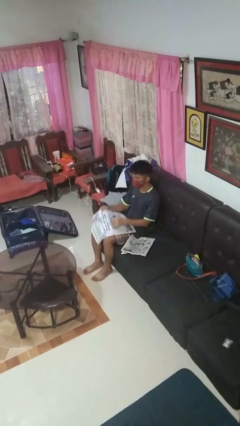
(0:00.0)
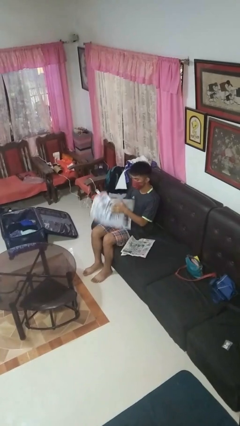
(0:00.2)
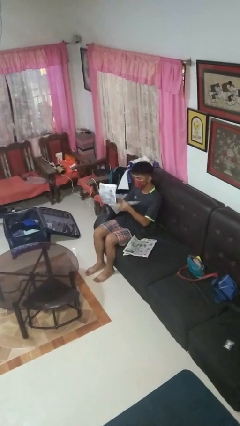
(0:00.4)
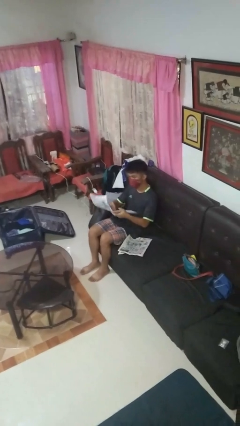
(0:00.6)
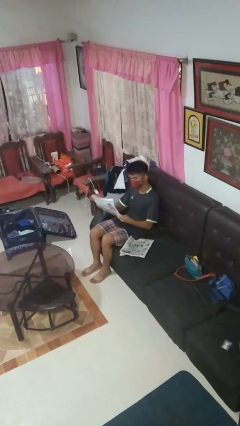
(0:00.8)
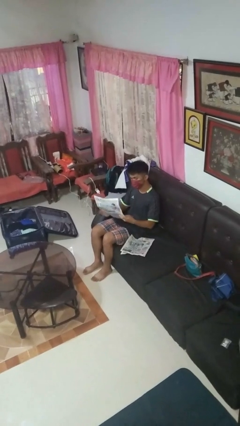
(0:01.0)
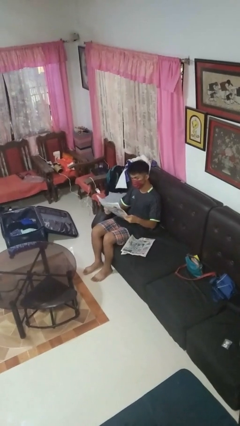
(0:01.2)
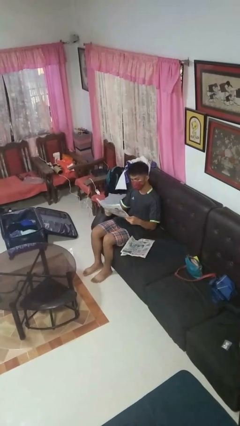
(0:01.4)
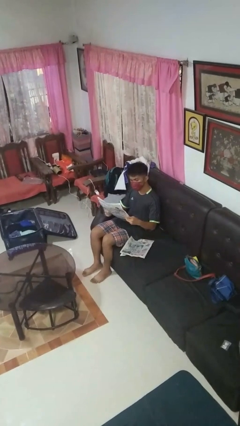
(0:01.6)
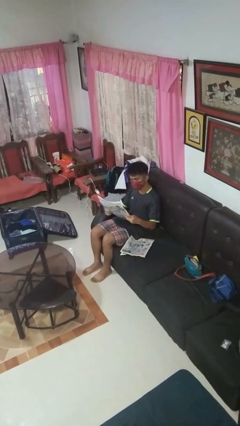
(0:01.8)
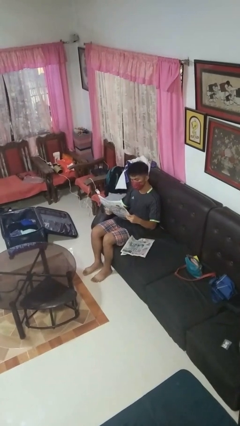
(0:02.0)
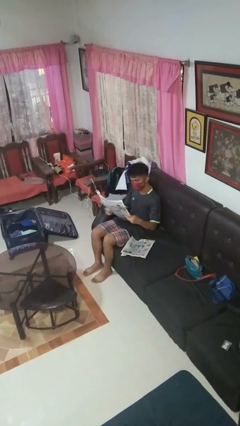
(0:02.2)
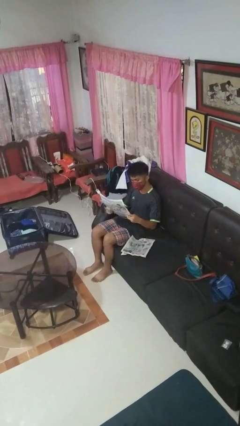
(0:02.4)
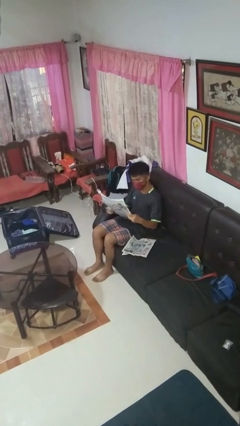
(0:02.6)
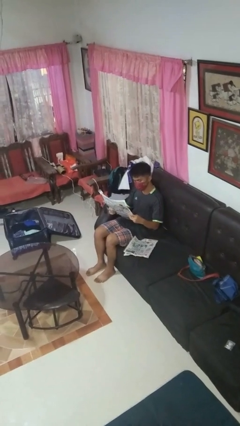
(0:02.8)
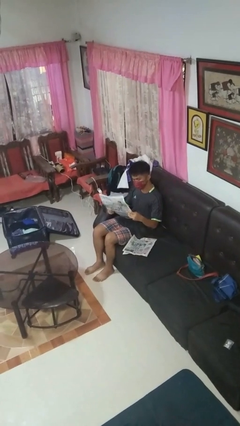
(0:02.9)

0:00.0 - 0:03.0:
person reads newspaper

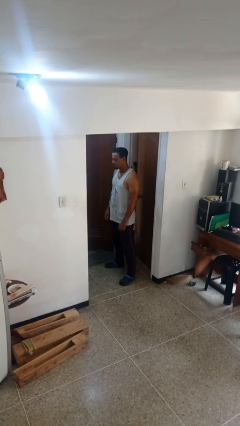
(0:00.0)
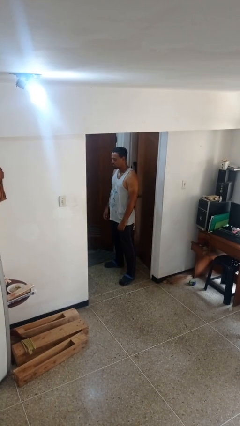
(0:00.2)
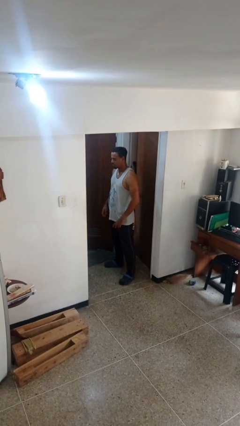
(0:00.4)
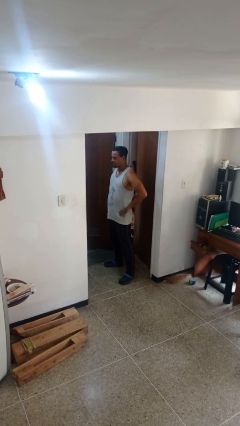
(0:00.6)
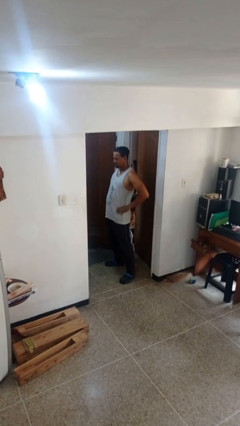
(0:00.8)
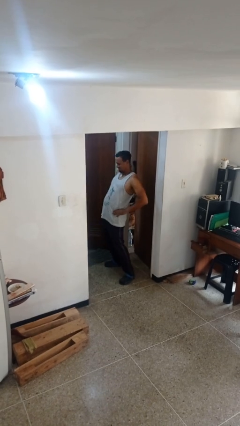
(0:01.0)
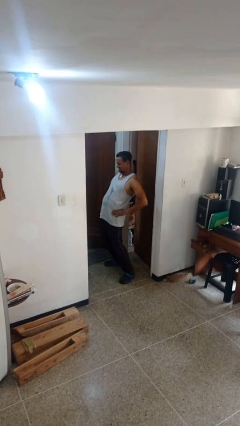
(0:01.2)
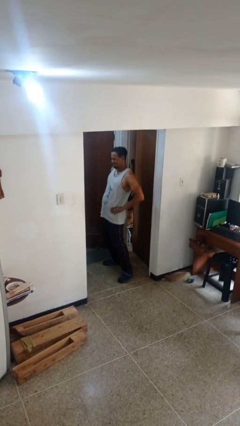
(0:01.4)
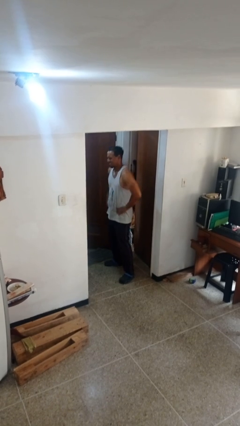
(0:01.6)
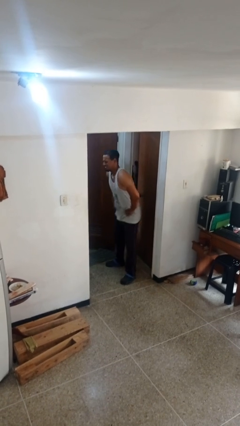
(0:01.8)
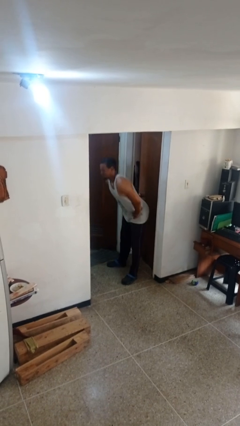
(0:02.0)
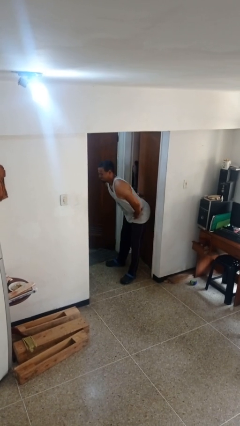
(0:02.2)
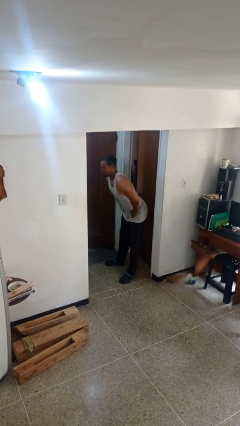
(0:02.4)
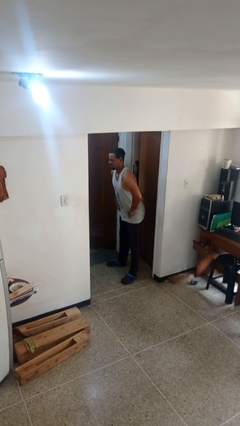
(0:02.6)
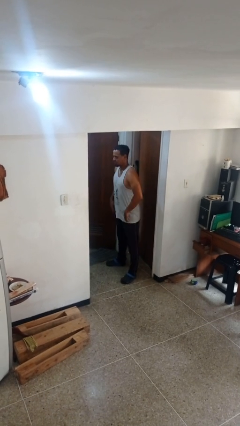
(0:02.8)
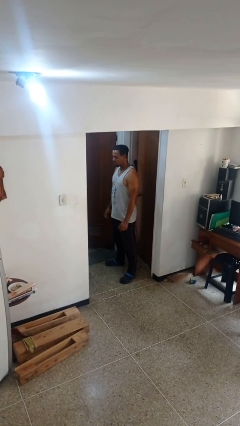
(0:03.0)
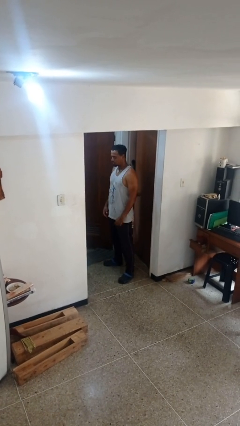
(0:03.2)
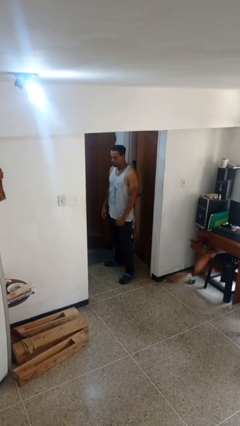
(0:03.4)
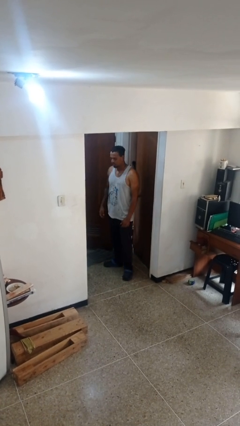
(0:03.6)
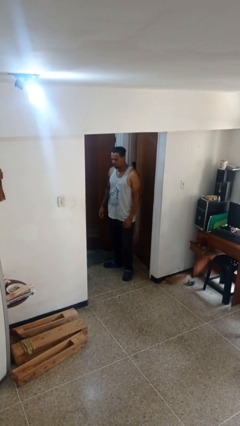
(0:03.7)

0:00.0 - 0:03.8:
person wiggles hips

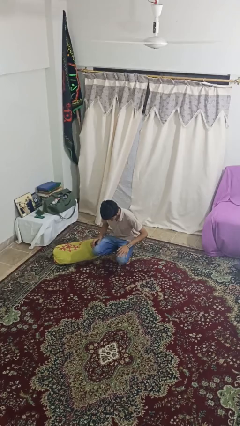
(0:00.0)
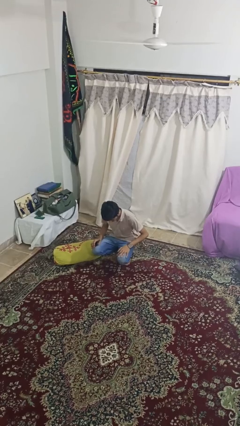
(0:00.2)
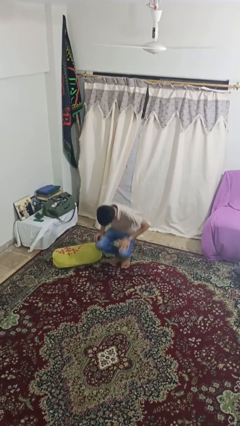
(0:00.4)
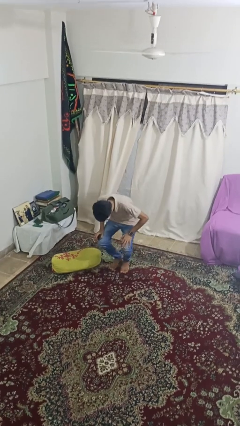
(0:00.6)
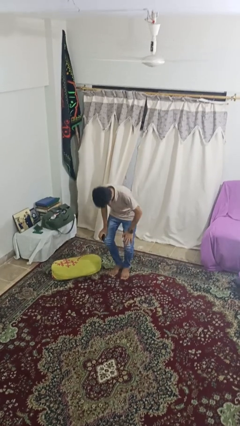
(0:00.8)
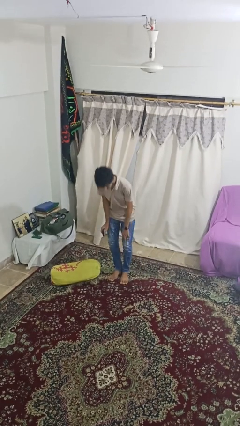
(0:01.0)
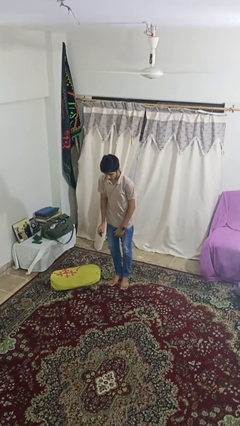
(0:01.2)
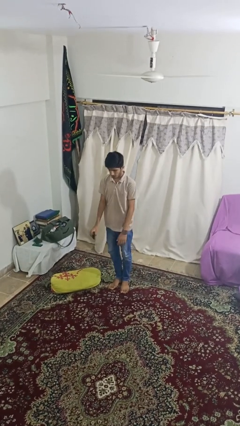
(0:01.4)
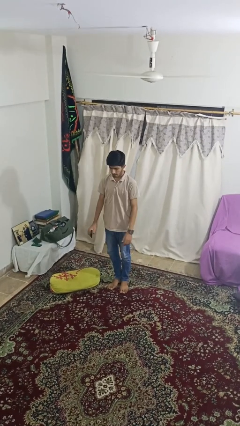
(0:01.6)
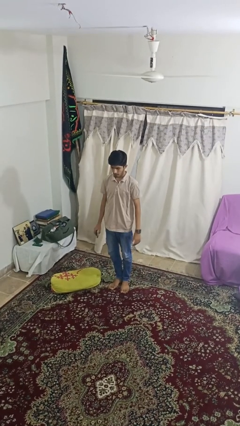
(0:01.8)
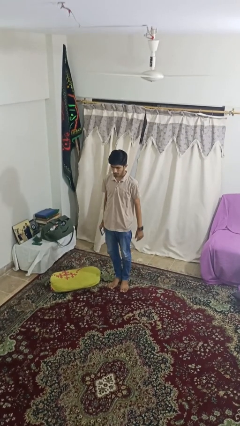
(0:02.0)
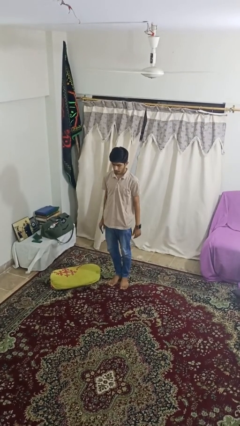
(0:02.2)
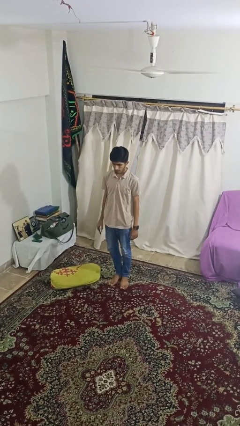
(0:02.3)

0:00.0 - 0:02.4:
person stands up

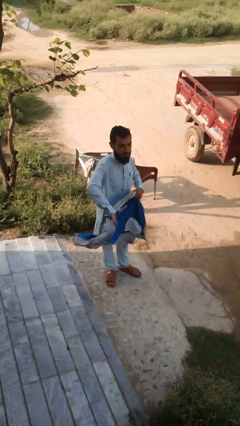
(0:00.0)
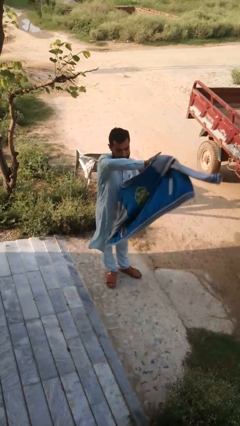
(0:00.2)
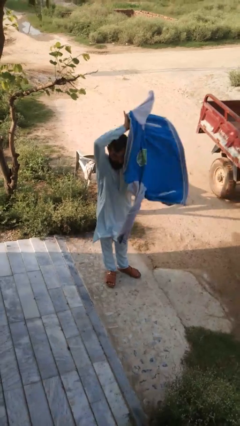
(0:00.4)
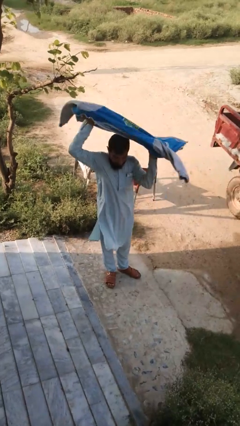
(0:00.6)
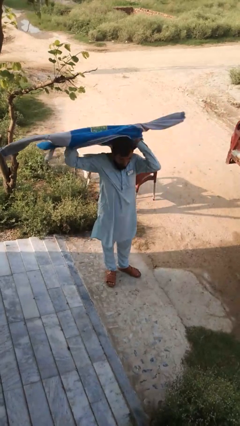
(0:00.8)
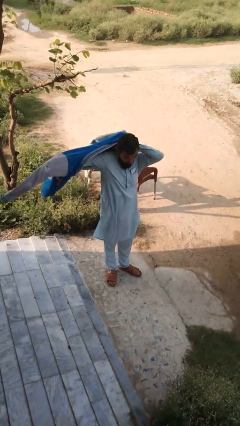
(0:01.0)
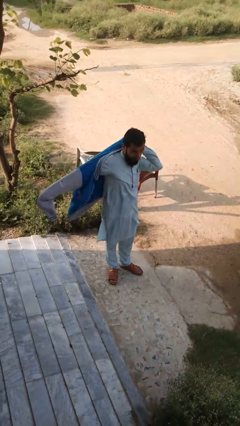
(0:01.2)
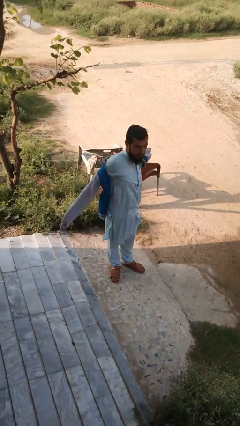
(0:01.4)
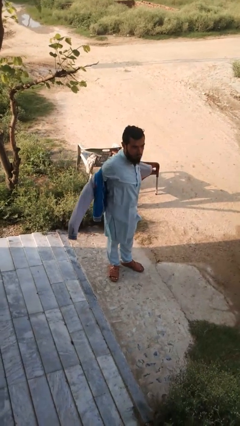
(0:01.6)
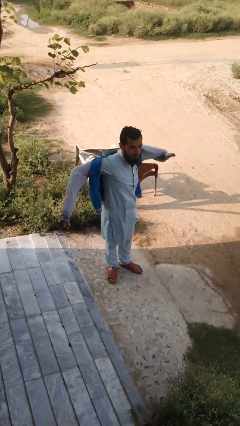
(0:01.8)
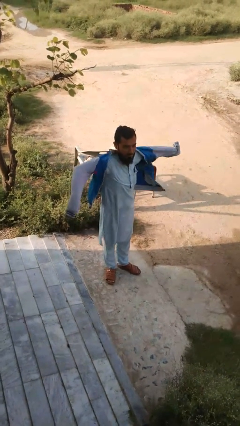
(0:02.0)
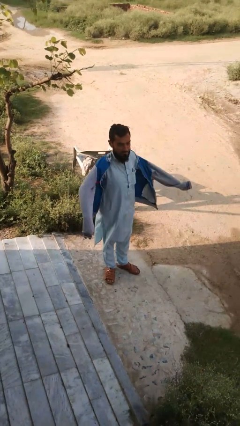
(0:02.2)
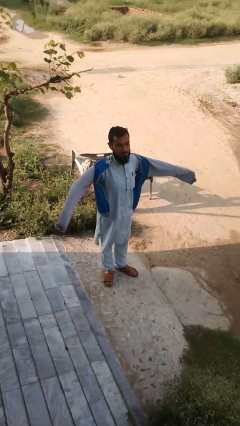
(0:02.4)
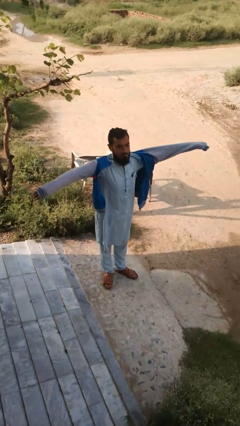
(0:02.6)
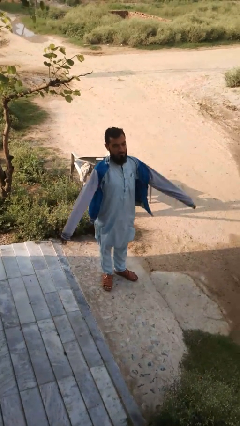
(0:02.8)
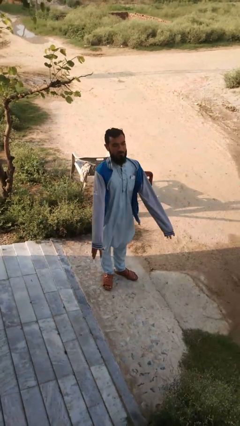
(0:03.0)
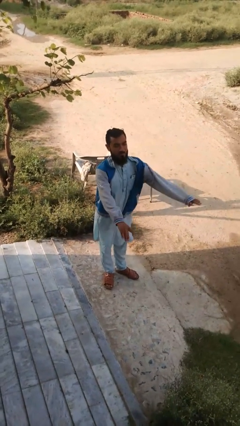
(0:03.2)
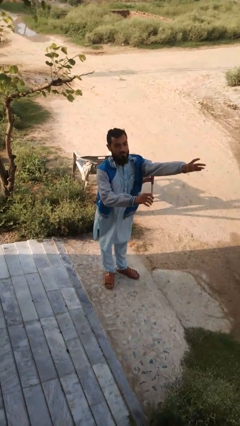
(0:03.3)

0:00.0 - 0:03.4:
person puts on jacket

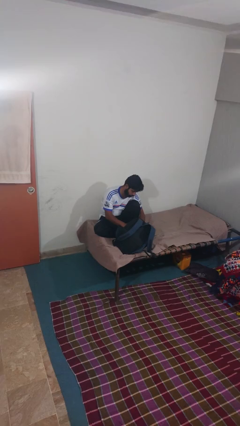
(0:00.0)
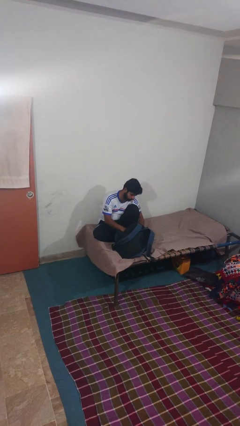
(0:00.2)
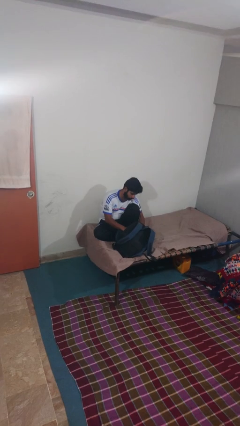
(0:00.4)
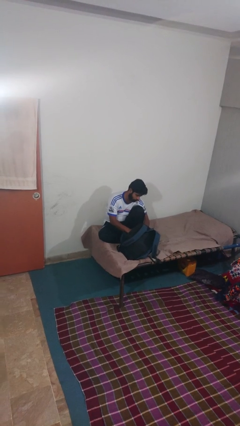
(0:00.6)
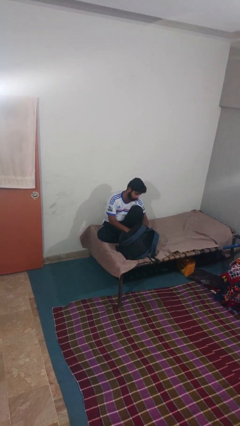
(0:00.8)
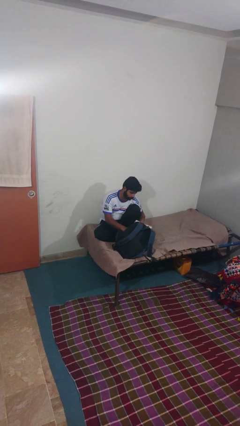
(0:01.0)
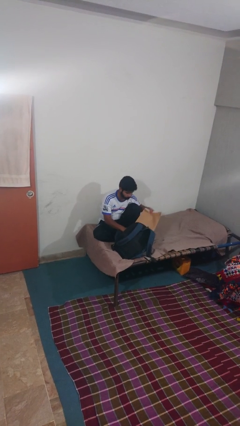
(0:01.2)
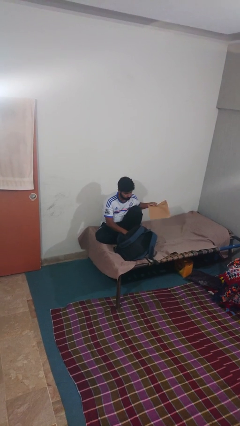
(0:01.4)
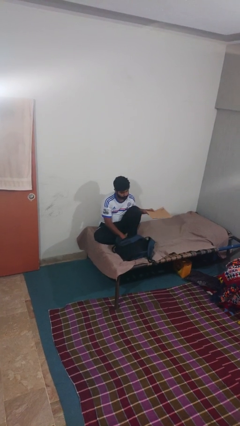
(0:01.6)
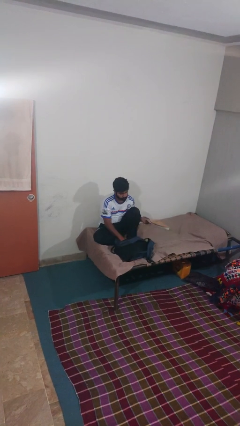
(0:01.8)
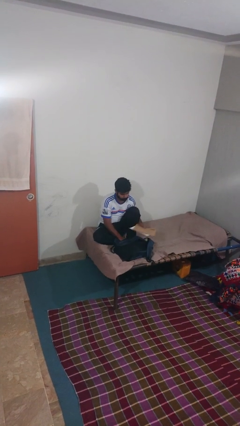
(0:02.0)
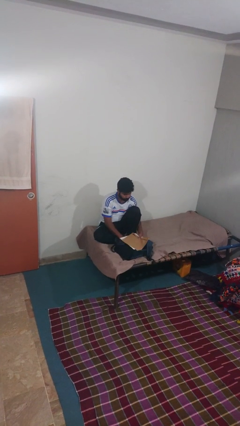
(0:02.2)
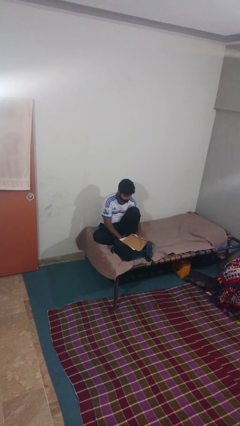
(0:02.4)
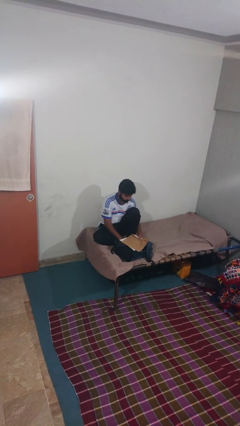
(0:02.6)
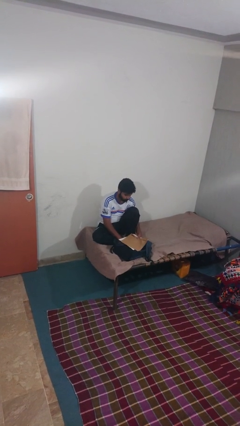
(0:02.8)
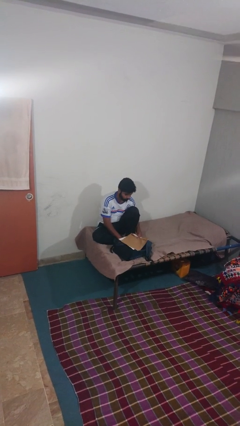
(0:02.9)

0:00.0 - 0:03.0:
person takes object from backpack

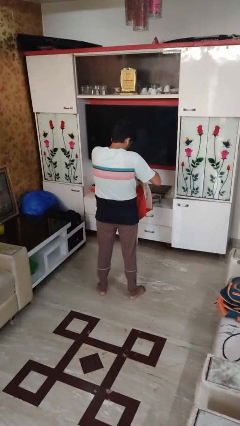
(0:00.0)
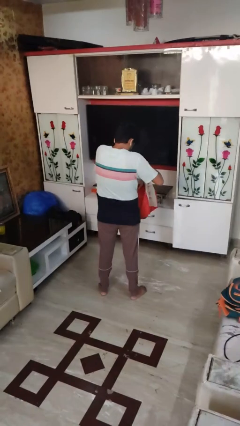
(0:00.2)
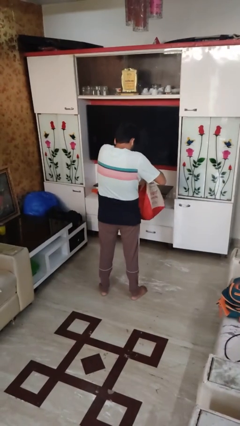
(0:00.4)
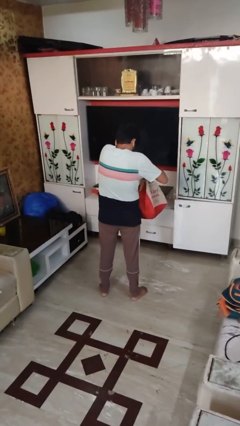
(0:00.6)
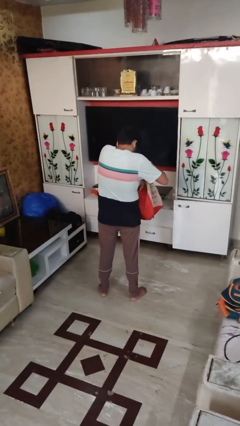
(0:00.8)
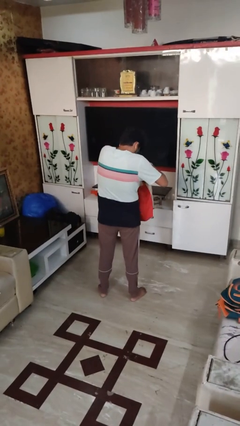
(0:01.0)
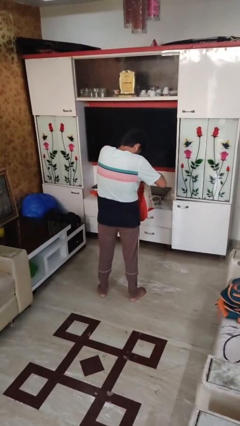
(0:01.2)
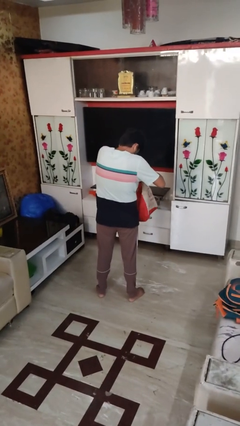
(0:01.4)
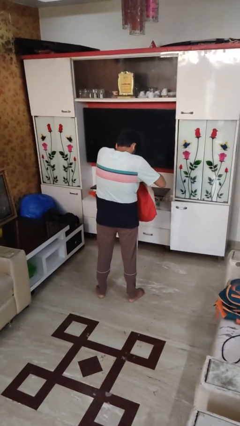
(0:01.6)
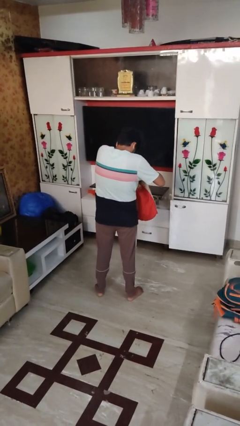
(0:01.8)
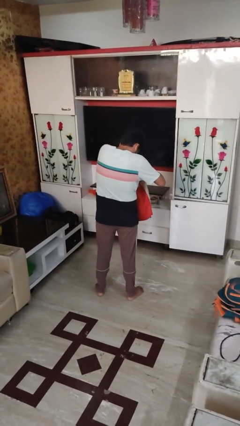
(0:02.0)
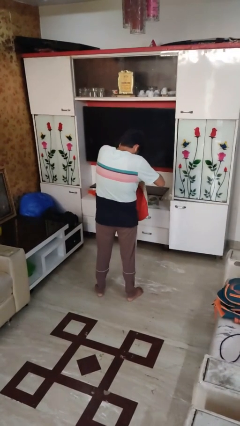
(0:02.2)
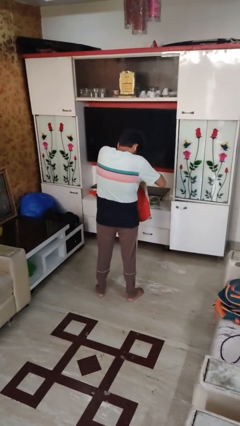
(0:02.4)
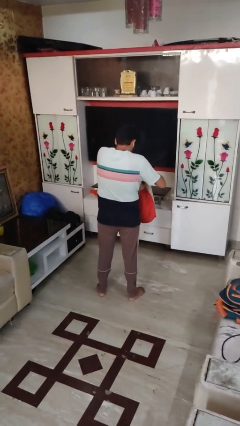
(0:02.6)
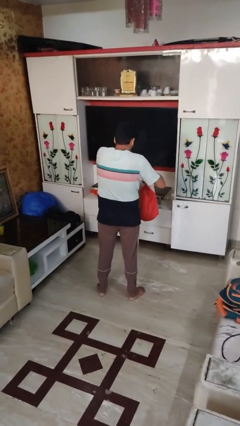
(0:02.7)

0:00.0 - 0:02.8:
person searches in bag
